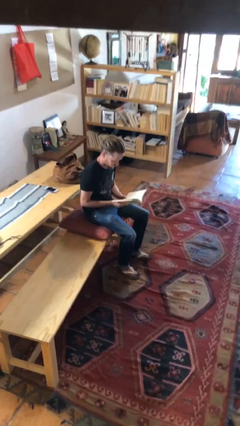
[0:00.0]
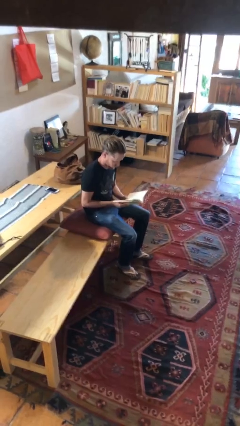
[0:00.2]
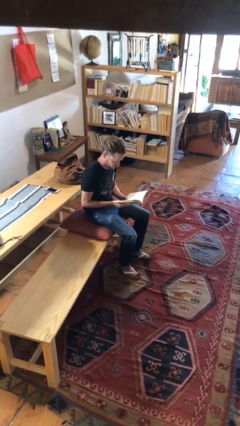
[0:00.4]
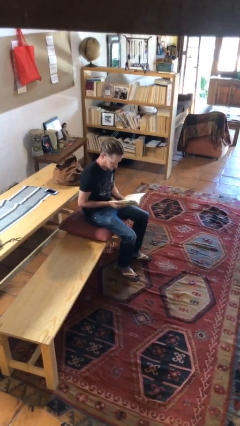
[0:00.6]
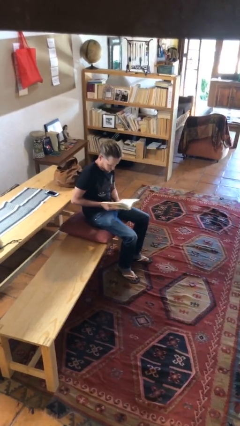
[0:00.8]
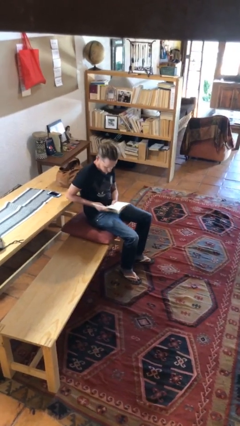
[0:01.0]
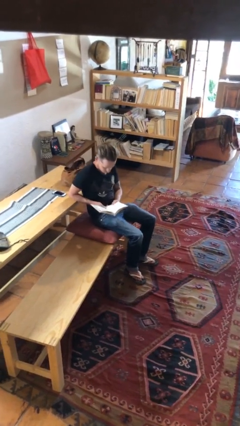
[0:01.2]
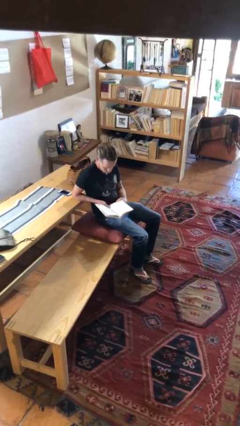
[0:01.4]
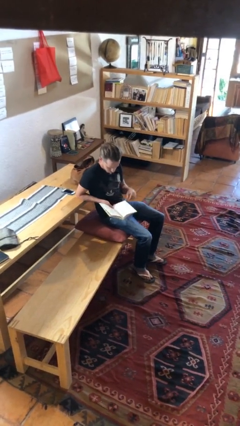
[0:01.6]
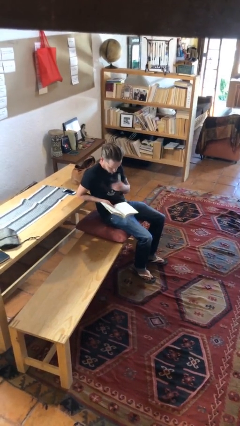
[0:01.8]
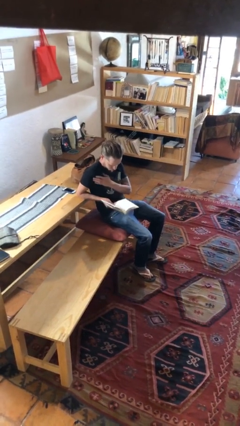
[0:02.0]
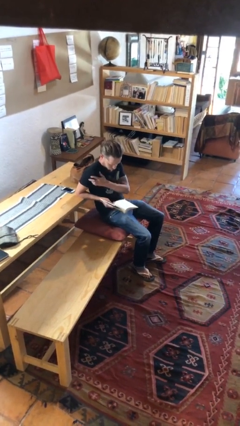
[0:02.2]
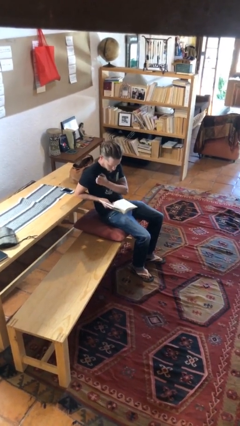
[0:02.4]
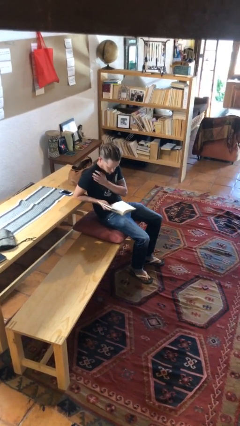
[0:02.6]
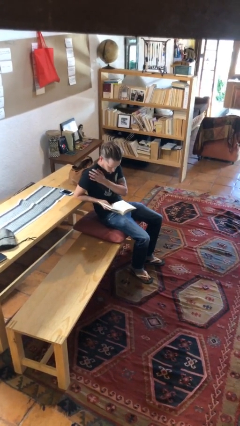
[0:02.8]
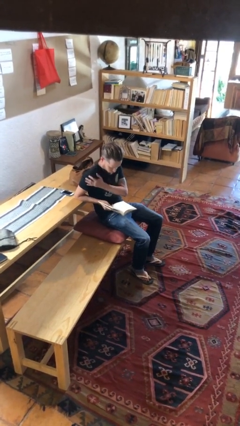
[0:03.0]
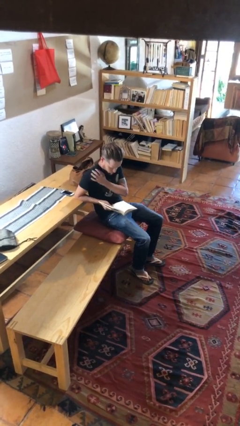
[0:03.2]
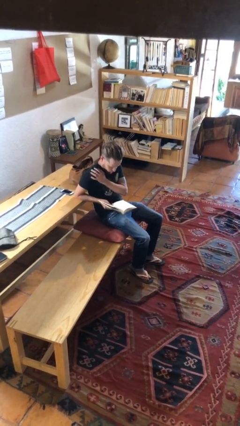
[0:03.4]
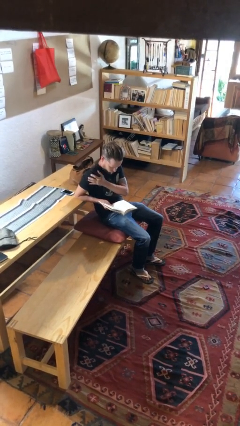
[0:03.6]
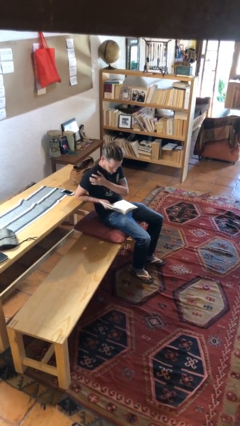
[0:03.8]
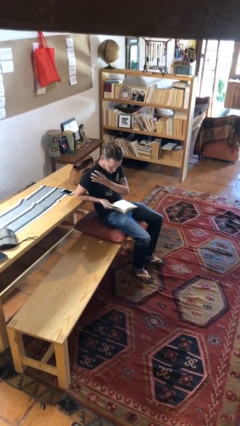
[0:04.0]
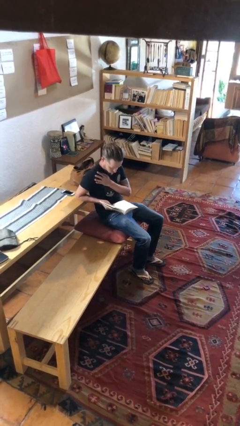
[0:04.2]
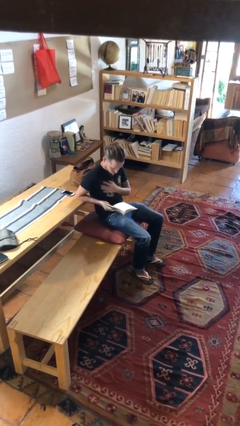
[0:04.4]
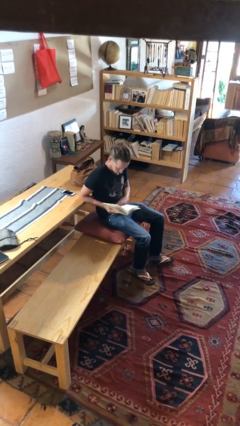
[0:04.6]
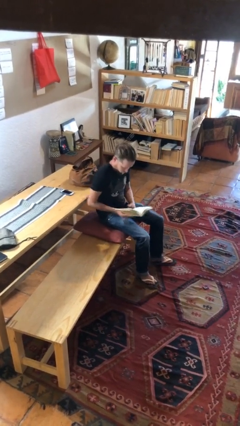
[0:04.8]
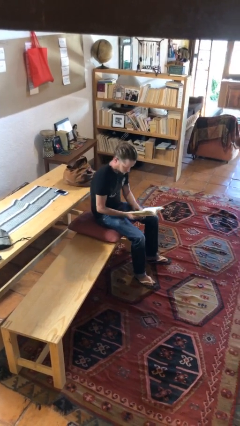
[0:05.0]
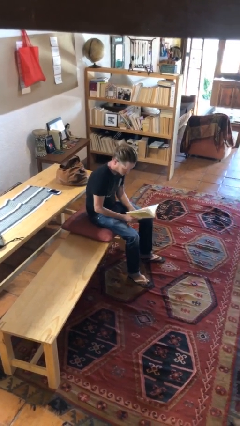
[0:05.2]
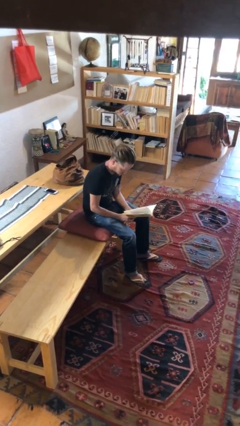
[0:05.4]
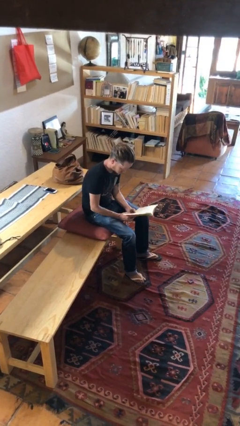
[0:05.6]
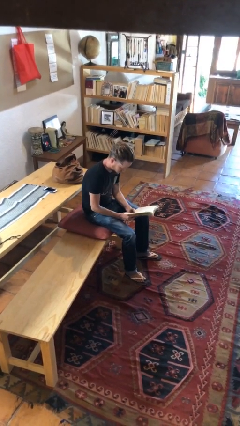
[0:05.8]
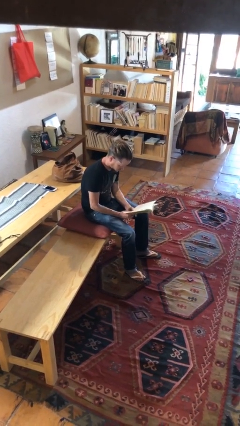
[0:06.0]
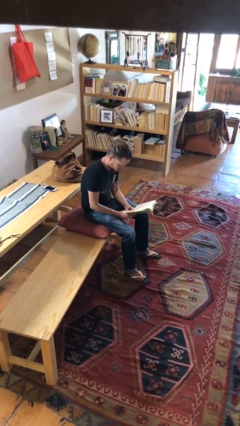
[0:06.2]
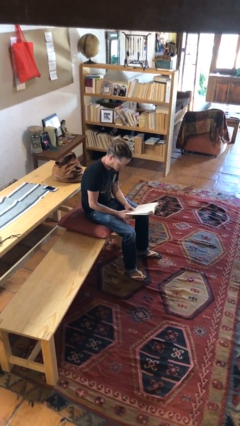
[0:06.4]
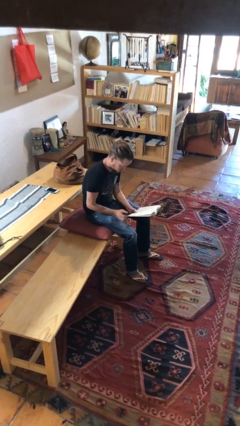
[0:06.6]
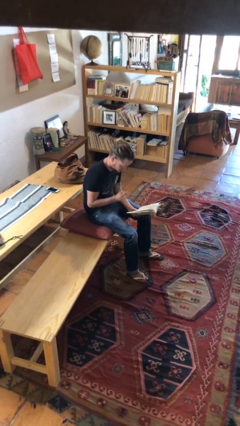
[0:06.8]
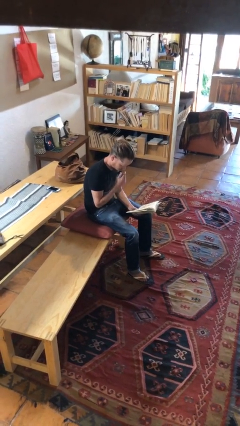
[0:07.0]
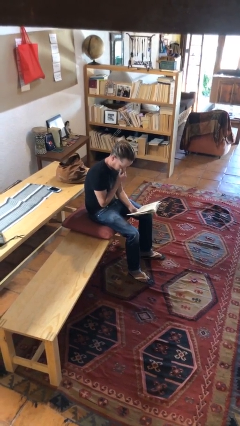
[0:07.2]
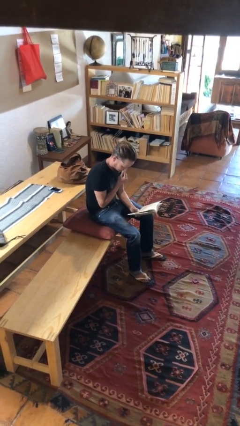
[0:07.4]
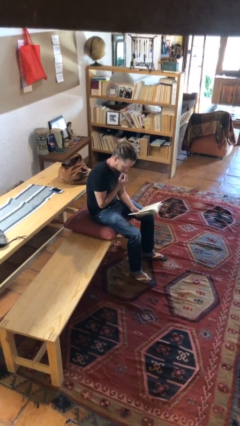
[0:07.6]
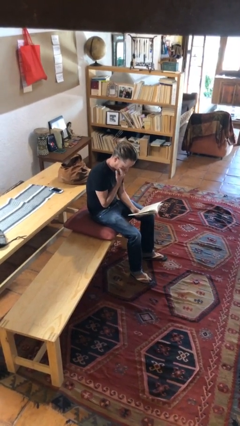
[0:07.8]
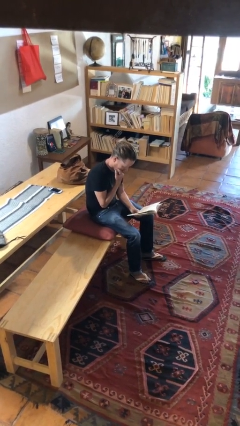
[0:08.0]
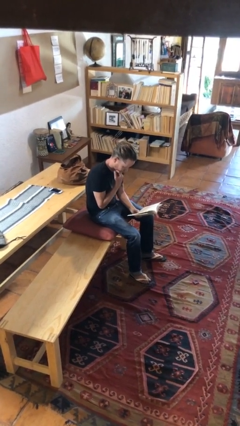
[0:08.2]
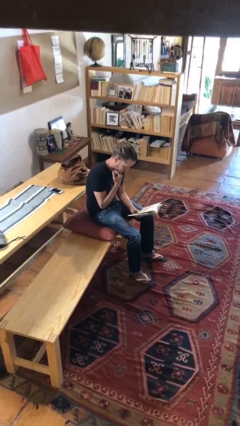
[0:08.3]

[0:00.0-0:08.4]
person reads document

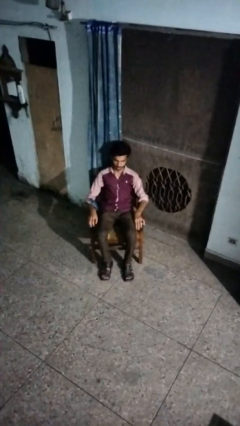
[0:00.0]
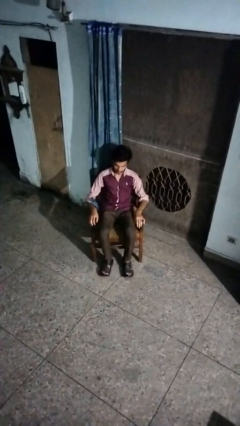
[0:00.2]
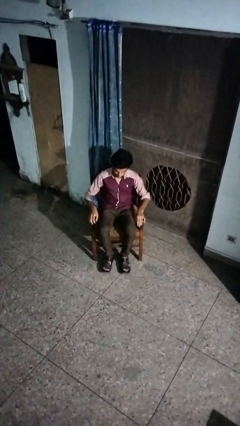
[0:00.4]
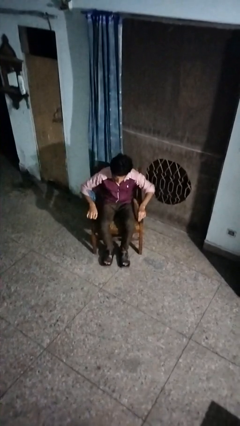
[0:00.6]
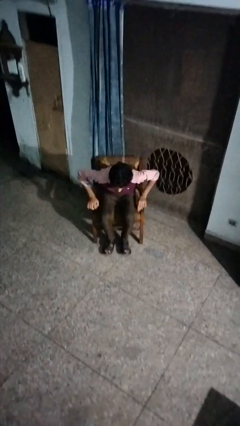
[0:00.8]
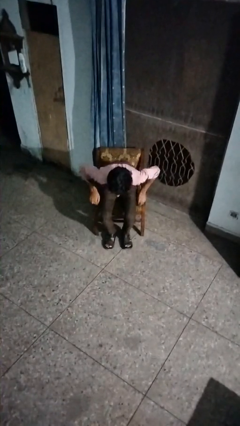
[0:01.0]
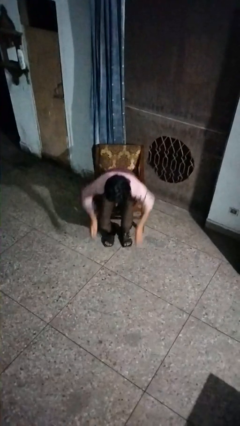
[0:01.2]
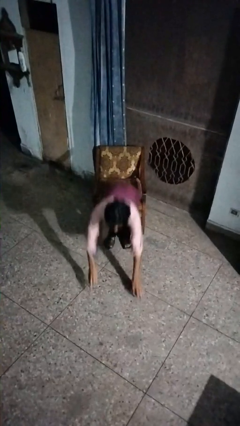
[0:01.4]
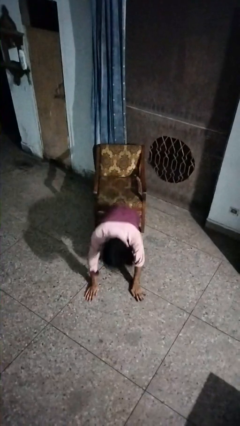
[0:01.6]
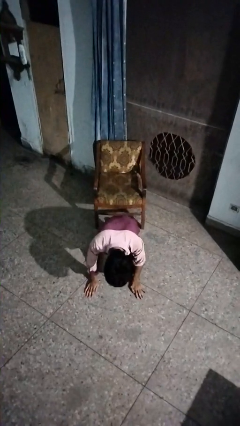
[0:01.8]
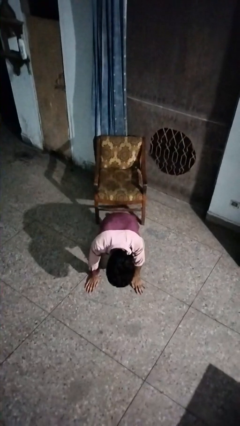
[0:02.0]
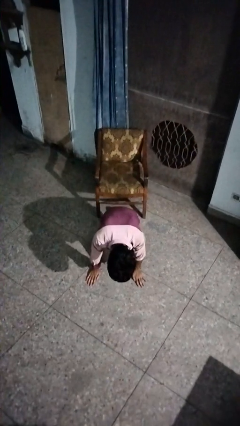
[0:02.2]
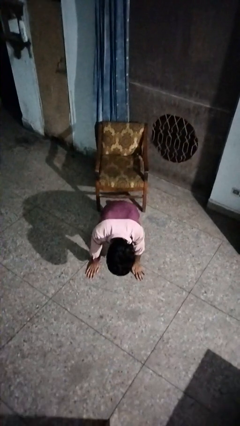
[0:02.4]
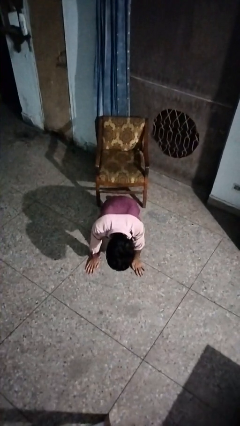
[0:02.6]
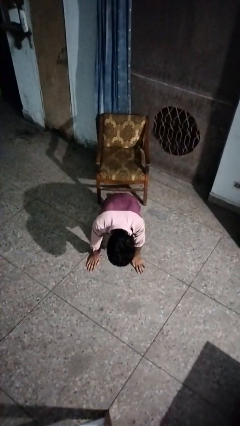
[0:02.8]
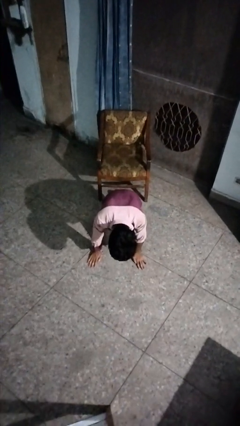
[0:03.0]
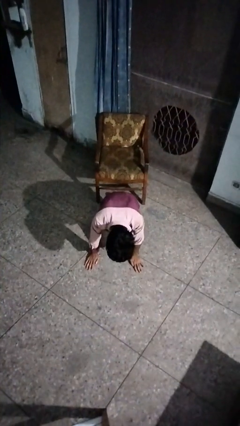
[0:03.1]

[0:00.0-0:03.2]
person falls from chair

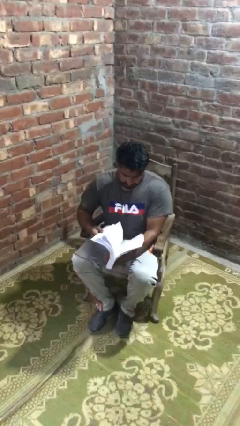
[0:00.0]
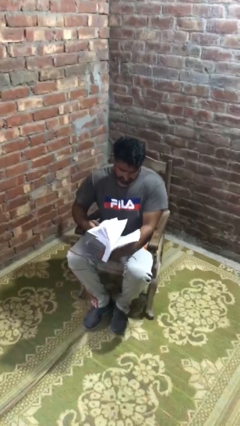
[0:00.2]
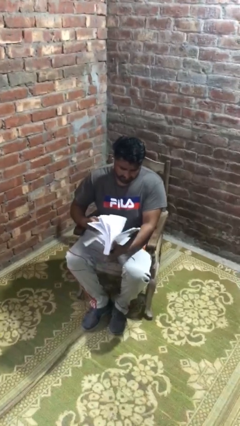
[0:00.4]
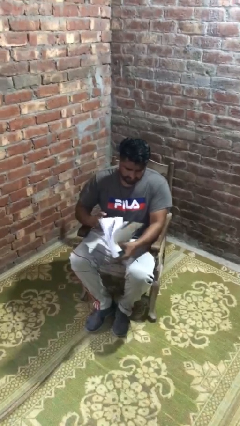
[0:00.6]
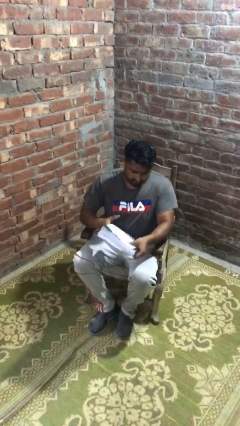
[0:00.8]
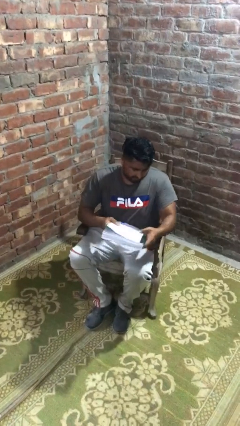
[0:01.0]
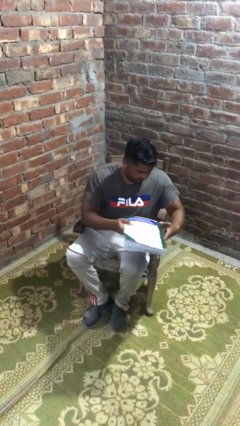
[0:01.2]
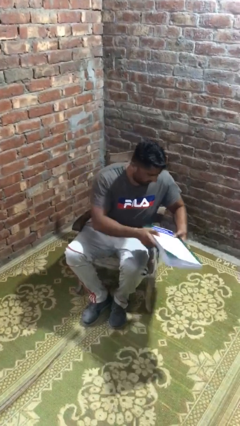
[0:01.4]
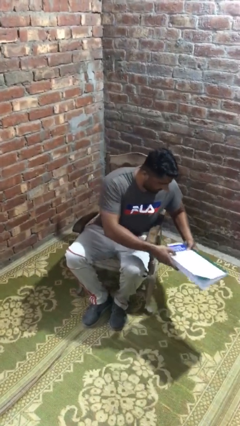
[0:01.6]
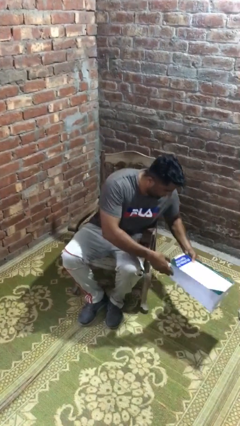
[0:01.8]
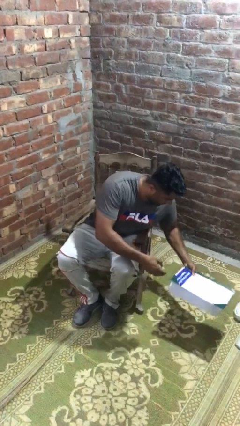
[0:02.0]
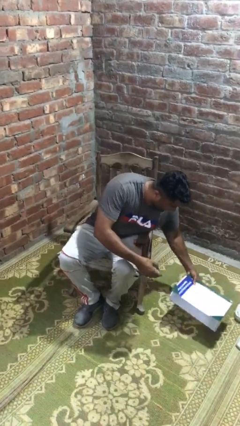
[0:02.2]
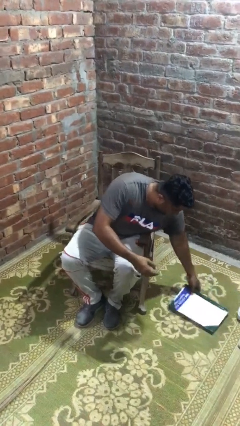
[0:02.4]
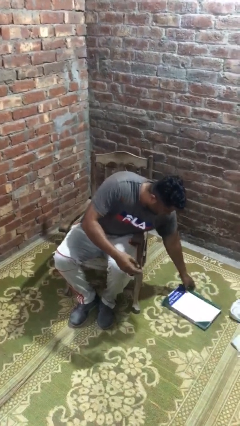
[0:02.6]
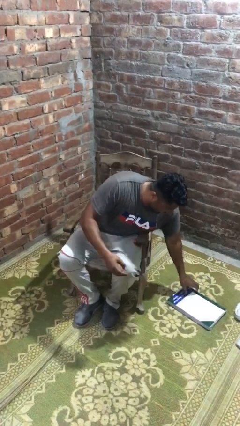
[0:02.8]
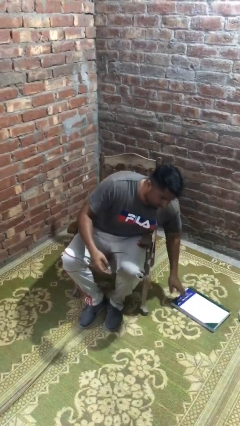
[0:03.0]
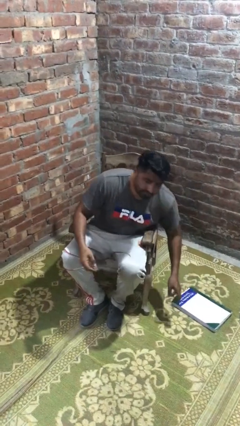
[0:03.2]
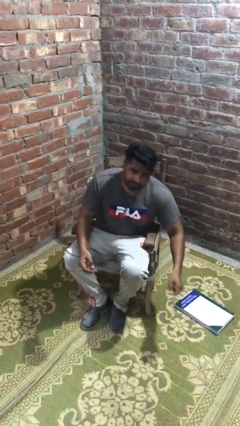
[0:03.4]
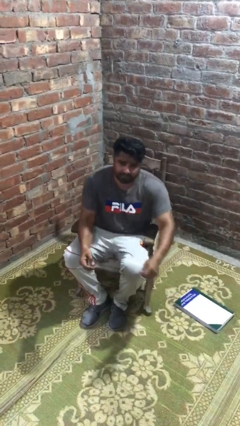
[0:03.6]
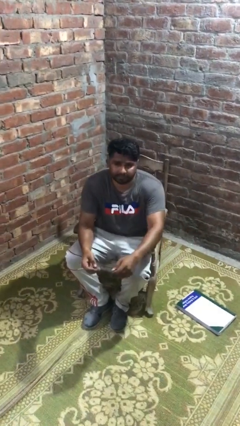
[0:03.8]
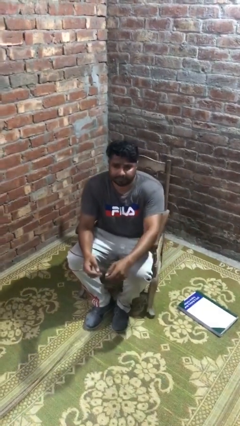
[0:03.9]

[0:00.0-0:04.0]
person puts down object on floor

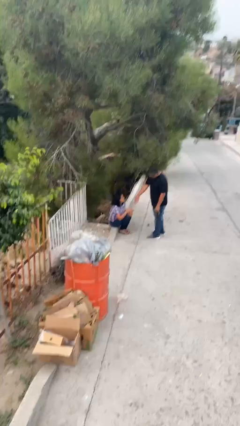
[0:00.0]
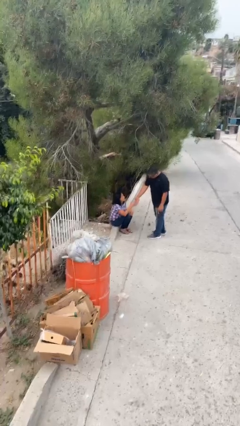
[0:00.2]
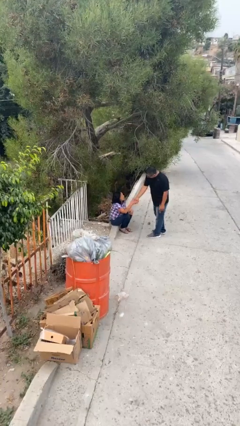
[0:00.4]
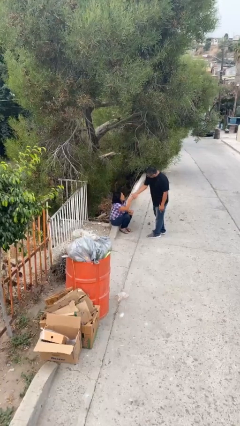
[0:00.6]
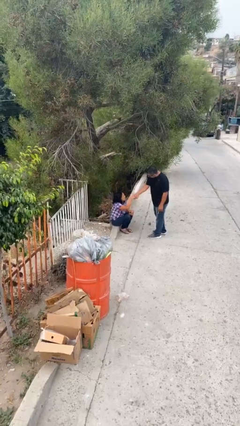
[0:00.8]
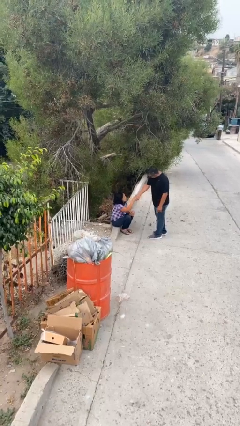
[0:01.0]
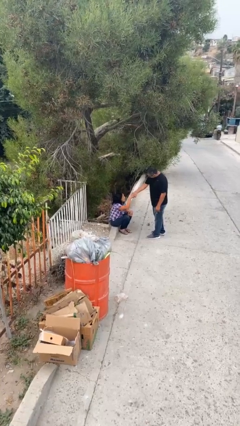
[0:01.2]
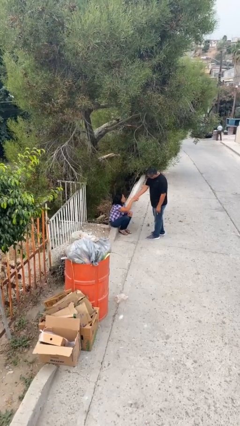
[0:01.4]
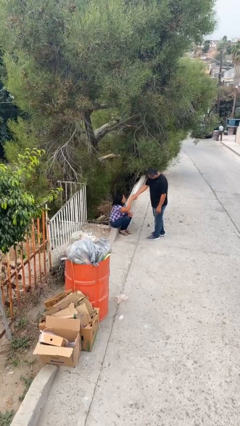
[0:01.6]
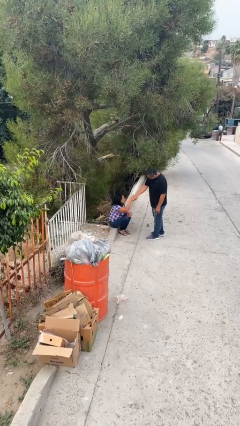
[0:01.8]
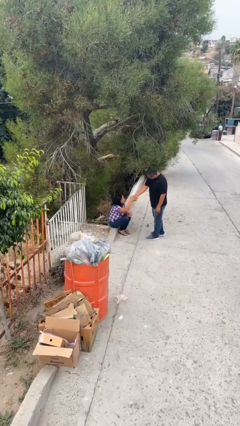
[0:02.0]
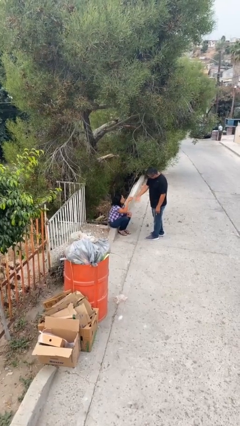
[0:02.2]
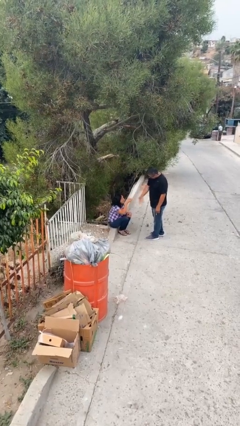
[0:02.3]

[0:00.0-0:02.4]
person shakes hand
